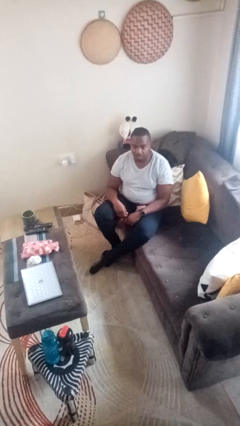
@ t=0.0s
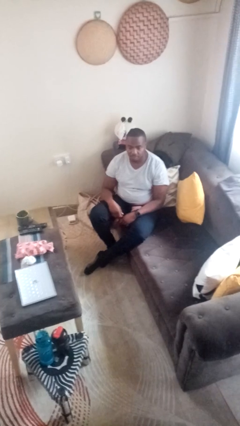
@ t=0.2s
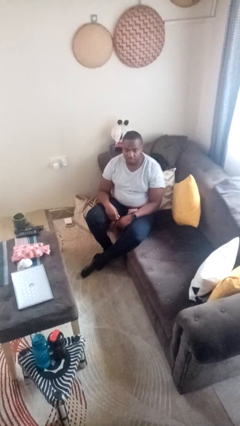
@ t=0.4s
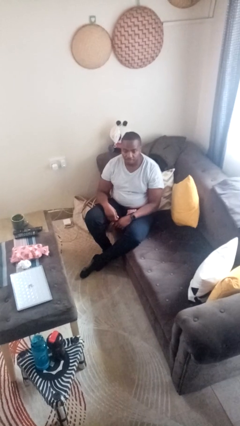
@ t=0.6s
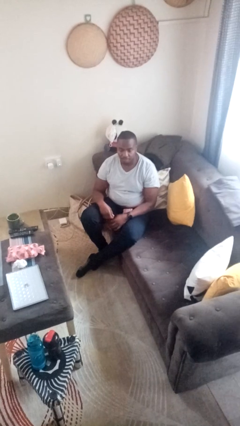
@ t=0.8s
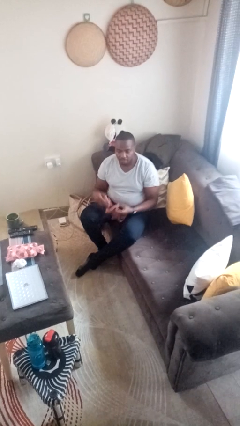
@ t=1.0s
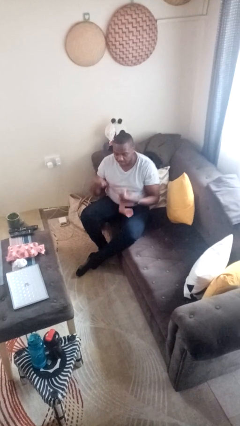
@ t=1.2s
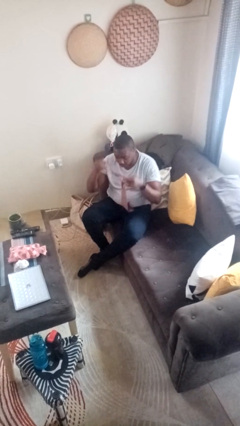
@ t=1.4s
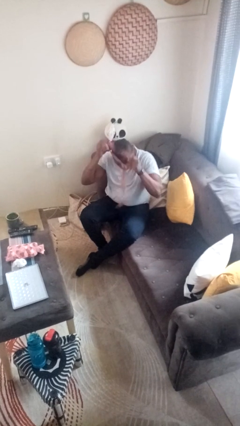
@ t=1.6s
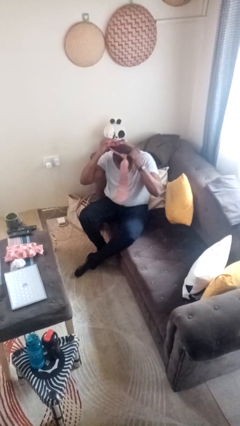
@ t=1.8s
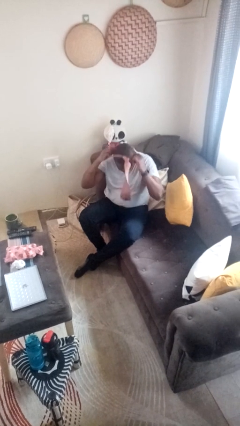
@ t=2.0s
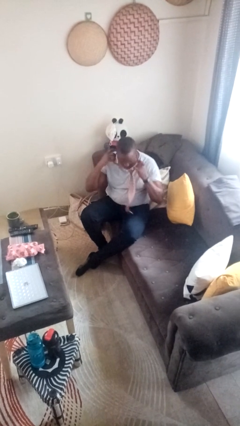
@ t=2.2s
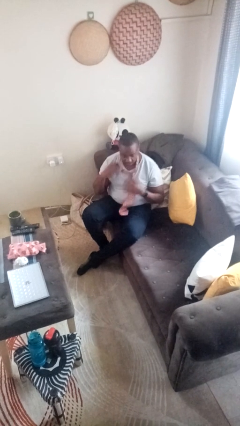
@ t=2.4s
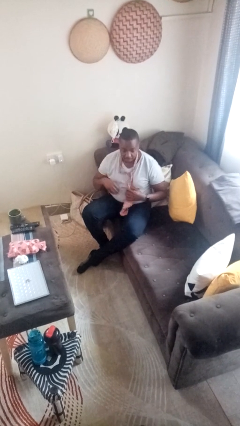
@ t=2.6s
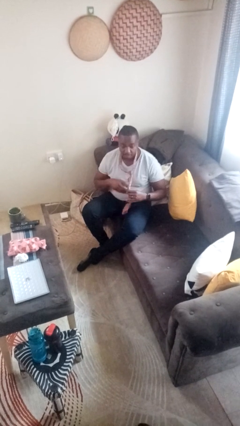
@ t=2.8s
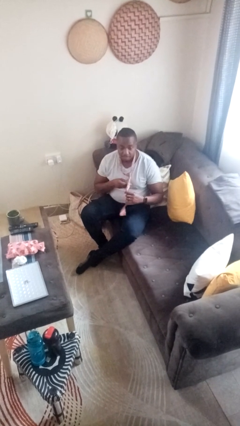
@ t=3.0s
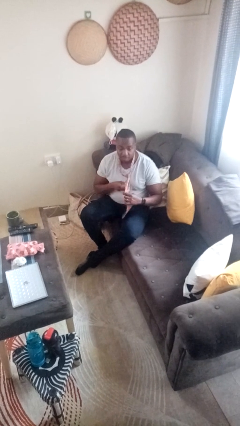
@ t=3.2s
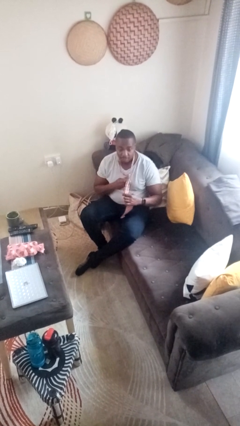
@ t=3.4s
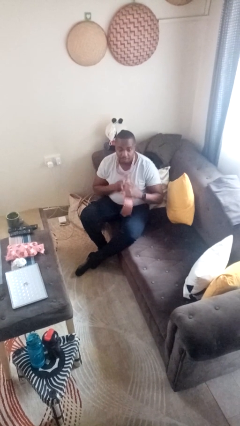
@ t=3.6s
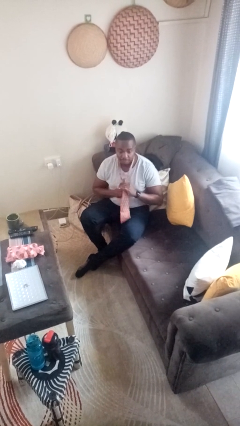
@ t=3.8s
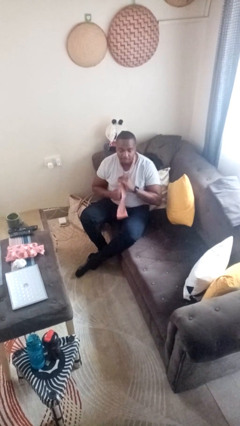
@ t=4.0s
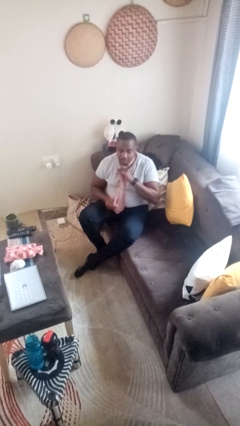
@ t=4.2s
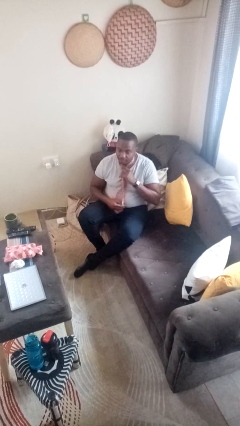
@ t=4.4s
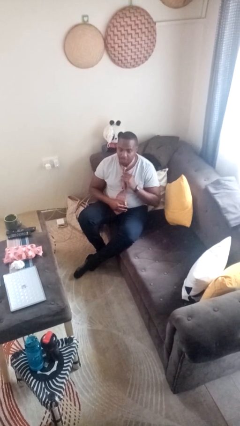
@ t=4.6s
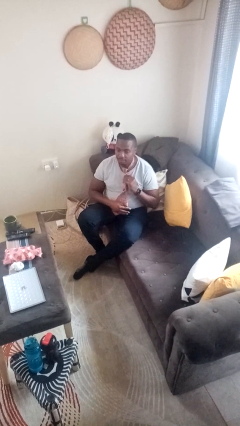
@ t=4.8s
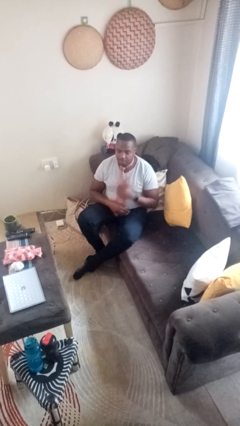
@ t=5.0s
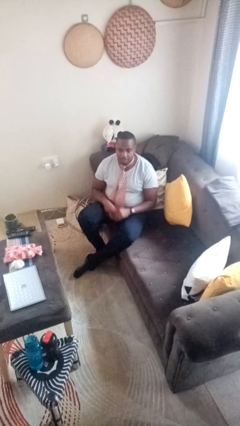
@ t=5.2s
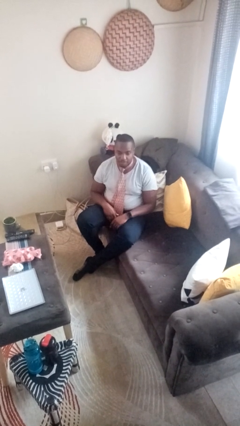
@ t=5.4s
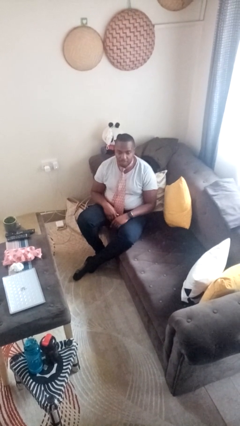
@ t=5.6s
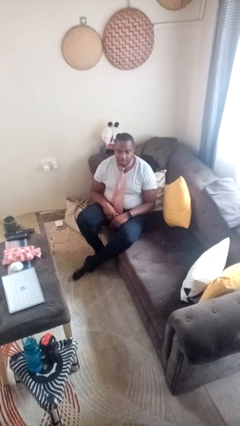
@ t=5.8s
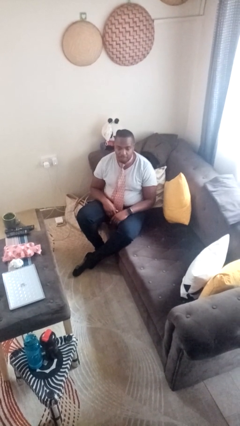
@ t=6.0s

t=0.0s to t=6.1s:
person puts on necktie

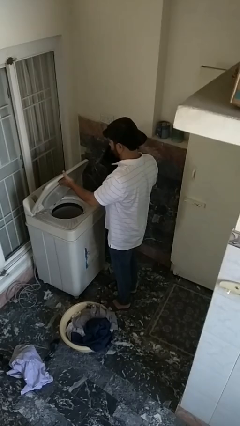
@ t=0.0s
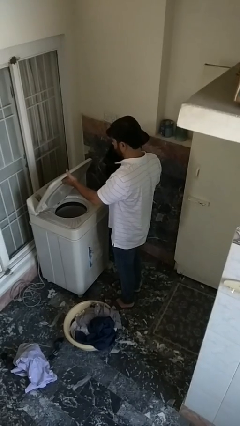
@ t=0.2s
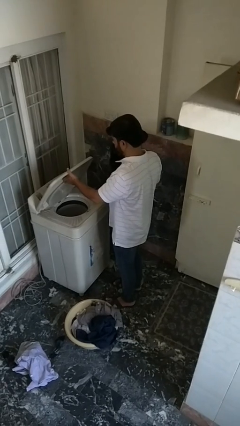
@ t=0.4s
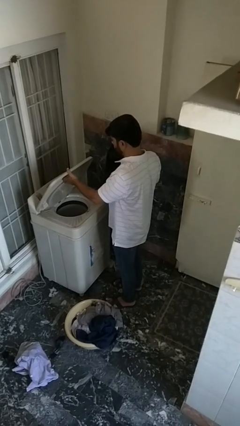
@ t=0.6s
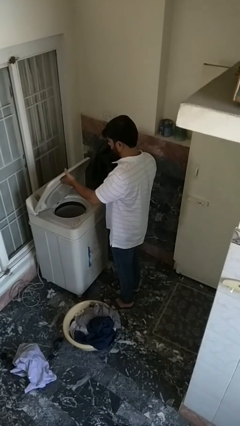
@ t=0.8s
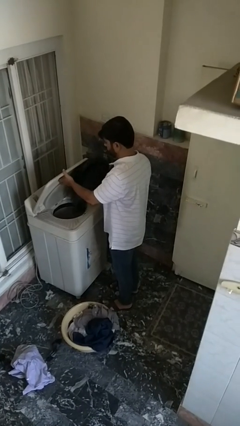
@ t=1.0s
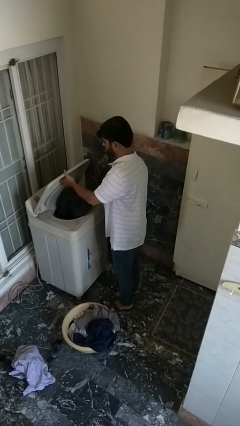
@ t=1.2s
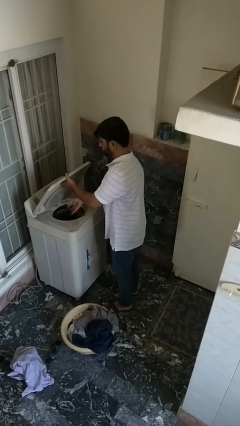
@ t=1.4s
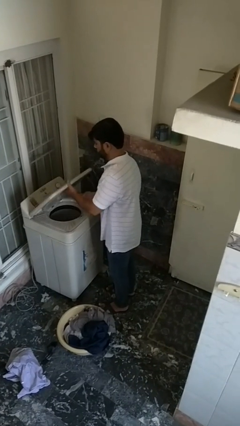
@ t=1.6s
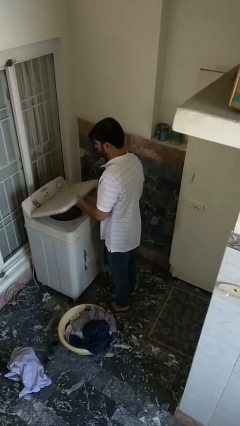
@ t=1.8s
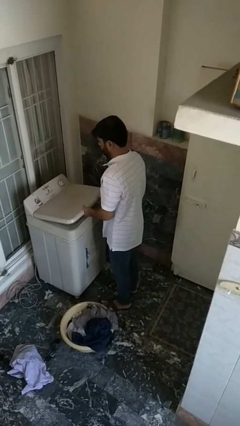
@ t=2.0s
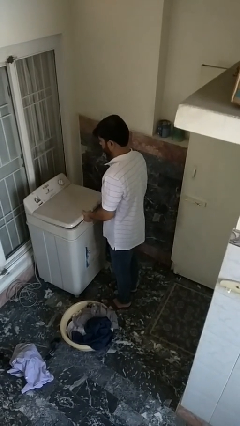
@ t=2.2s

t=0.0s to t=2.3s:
person loads dryer

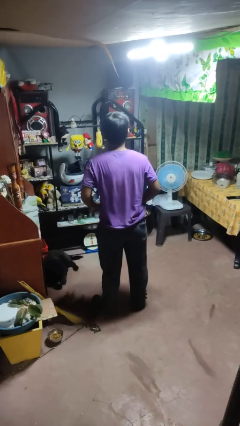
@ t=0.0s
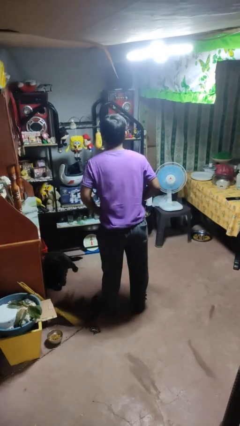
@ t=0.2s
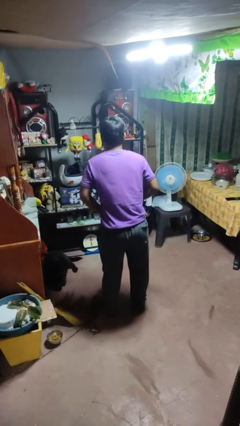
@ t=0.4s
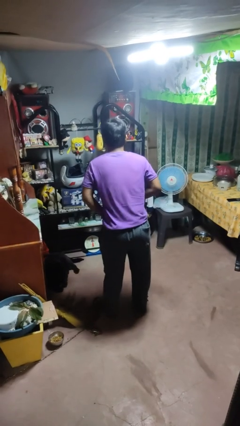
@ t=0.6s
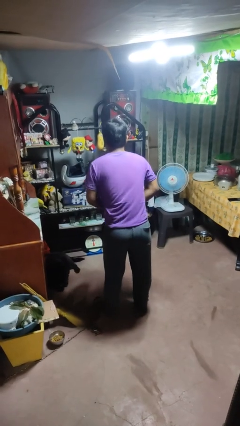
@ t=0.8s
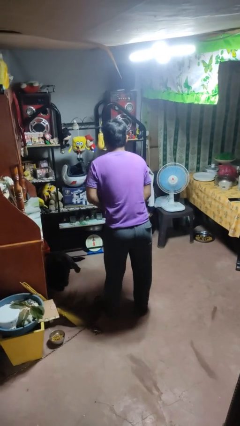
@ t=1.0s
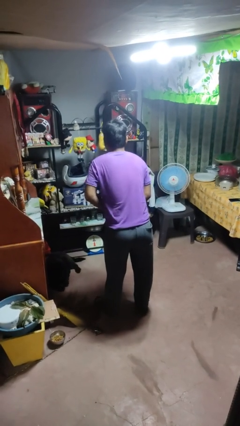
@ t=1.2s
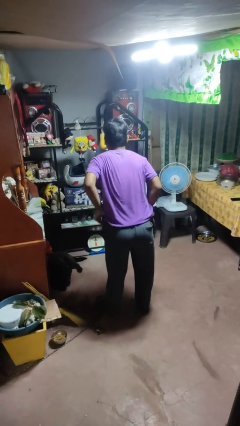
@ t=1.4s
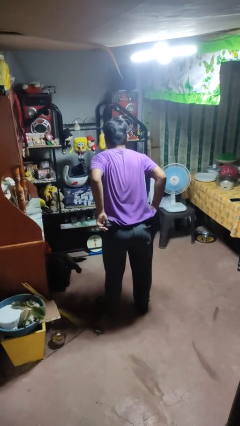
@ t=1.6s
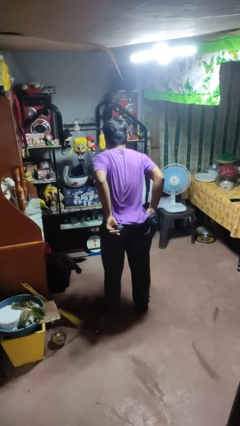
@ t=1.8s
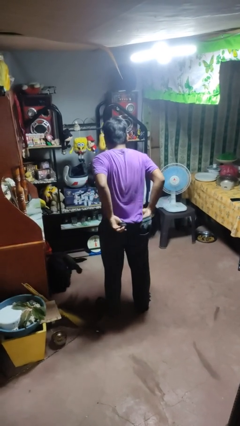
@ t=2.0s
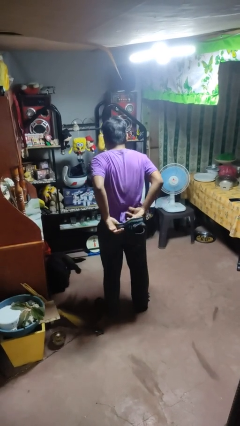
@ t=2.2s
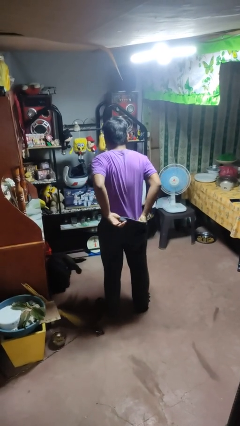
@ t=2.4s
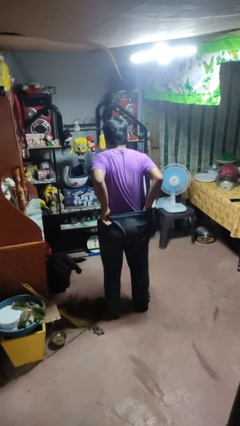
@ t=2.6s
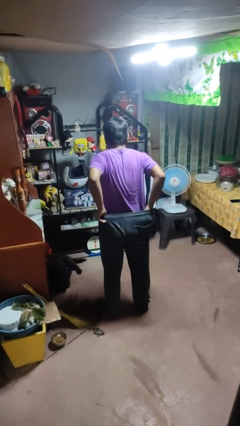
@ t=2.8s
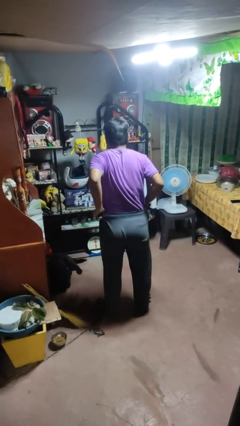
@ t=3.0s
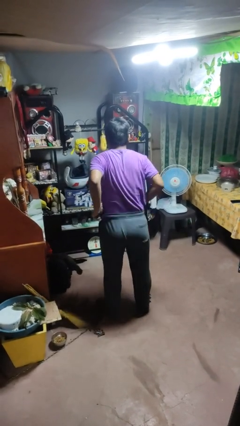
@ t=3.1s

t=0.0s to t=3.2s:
person tucks in shirt

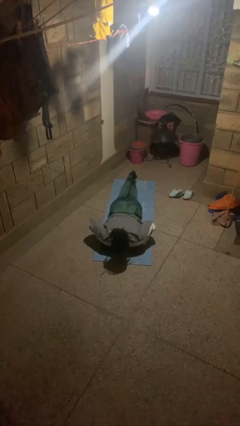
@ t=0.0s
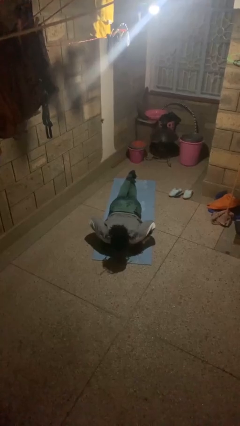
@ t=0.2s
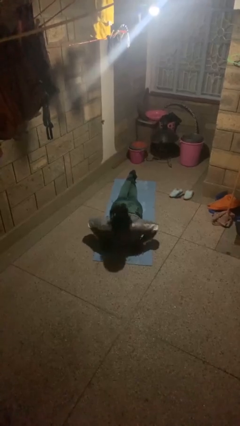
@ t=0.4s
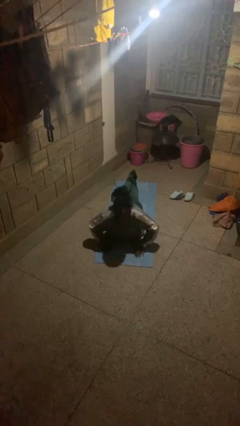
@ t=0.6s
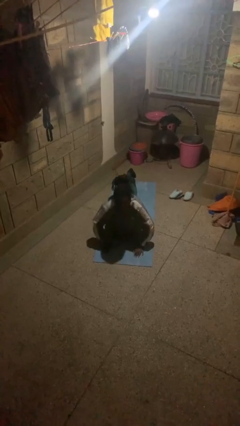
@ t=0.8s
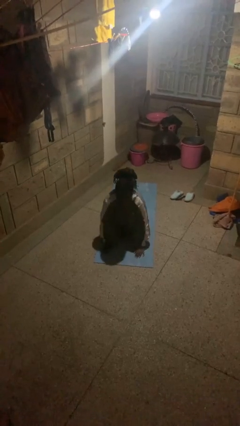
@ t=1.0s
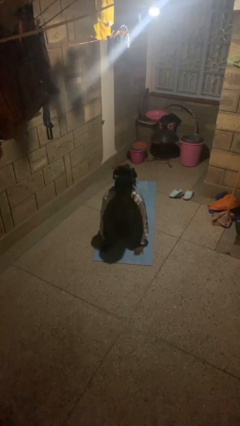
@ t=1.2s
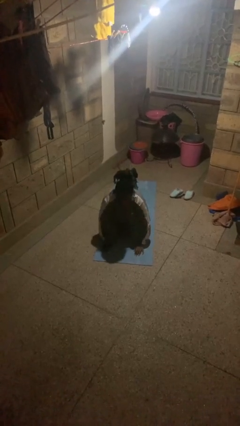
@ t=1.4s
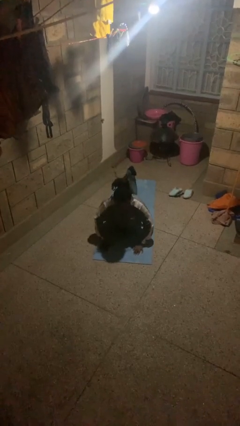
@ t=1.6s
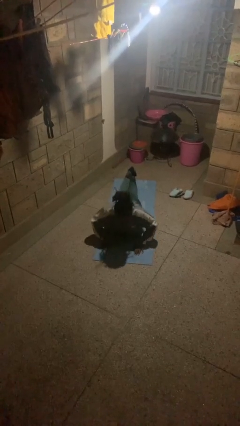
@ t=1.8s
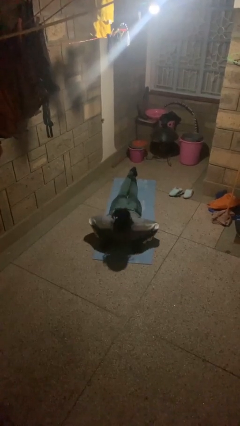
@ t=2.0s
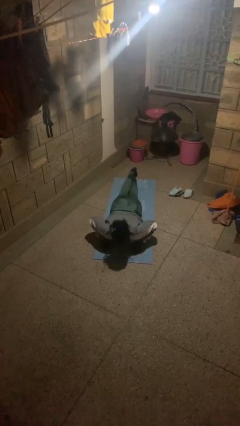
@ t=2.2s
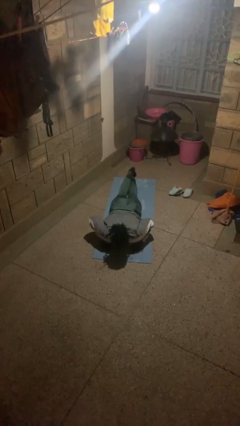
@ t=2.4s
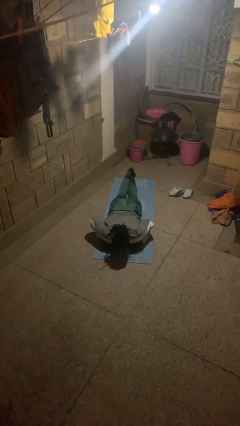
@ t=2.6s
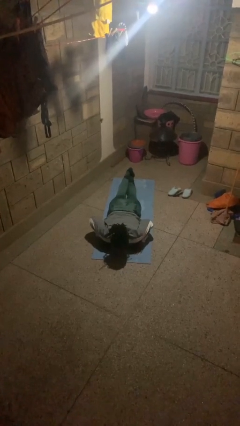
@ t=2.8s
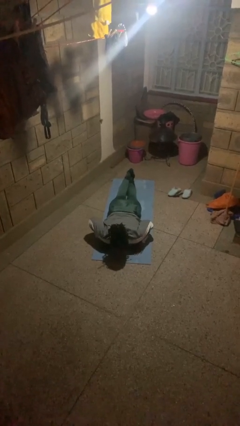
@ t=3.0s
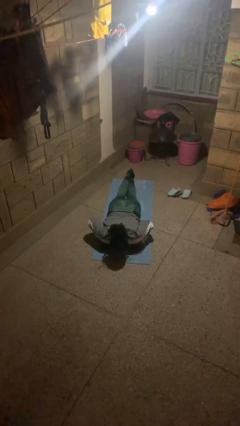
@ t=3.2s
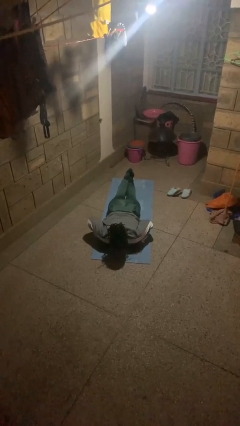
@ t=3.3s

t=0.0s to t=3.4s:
person exercises with pushup

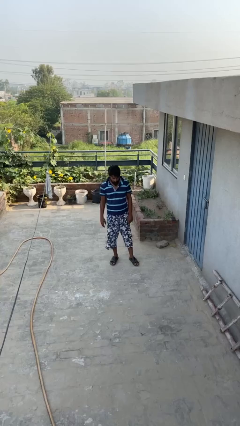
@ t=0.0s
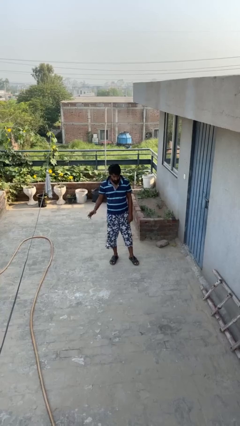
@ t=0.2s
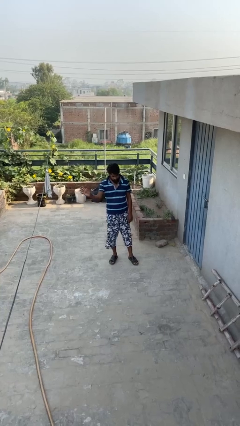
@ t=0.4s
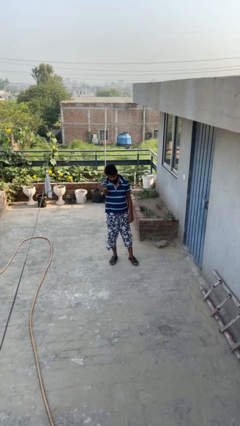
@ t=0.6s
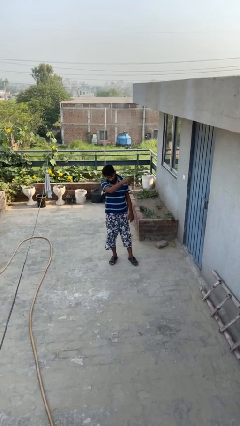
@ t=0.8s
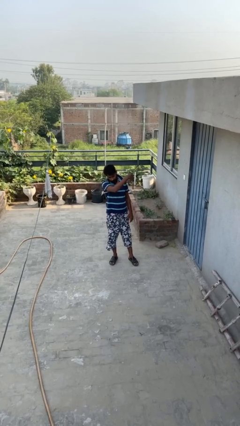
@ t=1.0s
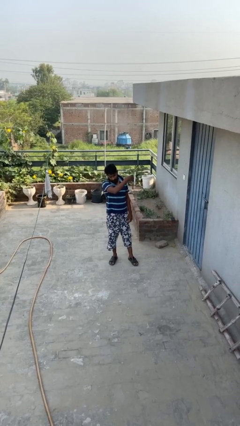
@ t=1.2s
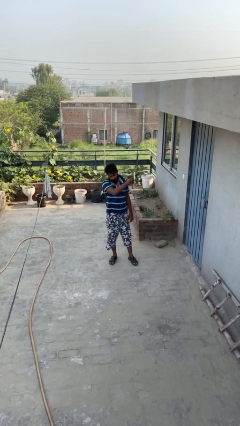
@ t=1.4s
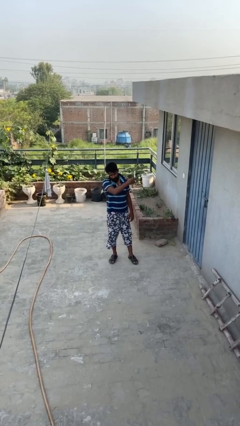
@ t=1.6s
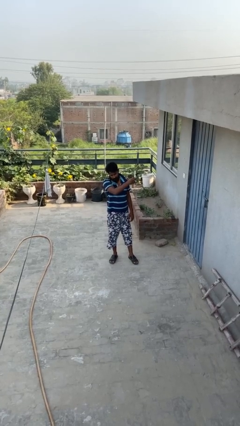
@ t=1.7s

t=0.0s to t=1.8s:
person gestures swipe left

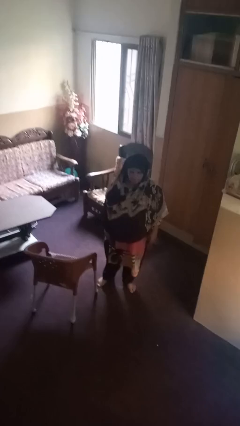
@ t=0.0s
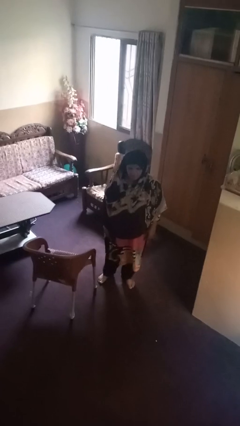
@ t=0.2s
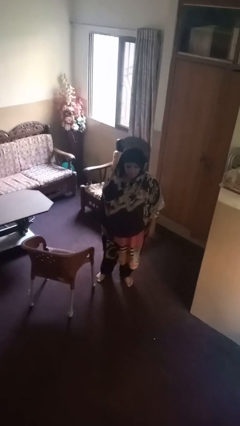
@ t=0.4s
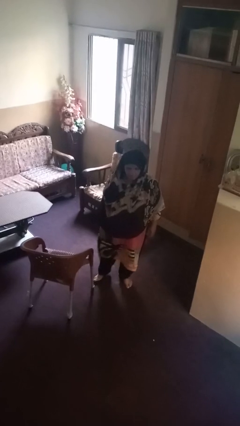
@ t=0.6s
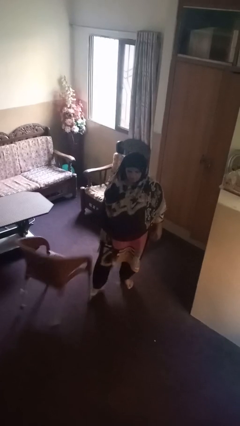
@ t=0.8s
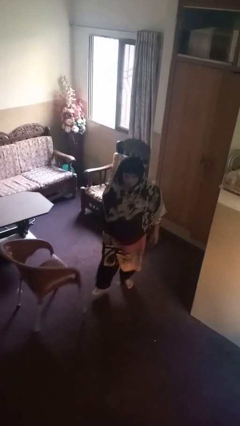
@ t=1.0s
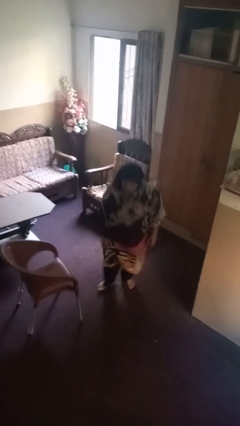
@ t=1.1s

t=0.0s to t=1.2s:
person trips on object on floor
